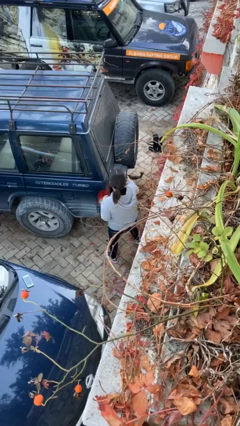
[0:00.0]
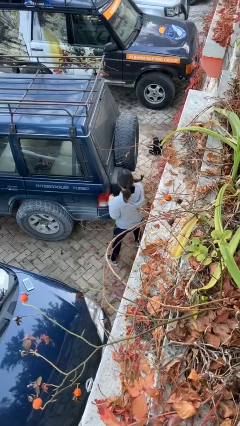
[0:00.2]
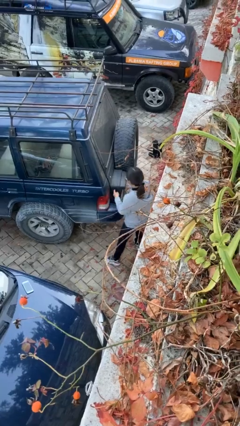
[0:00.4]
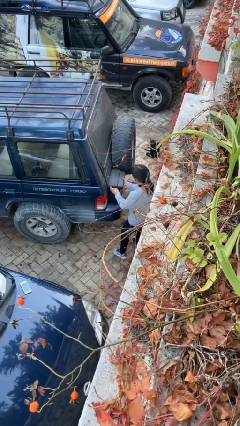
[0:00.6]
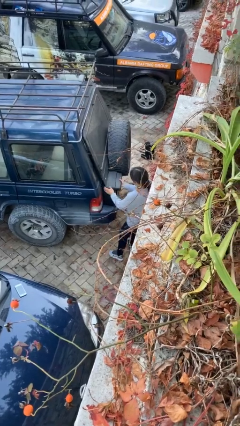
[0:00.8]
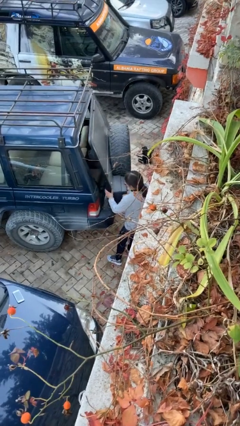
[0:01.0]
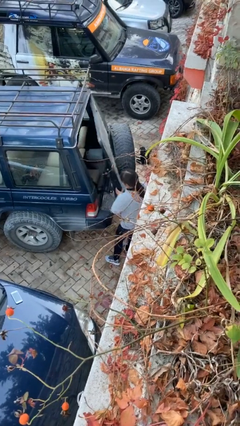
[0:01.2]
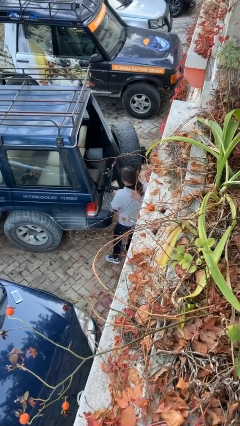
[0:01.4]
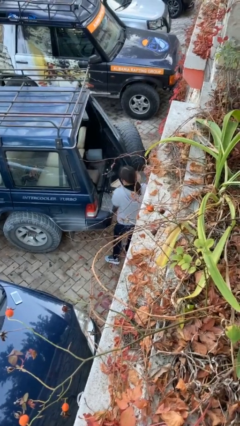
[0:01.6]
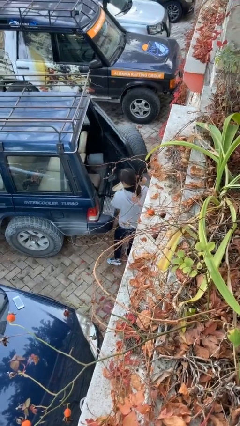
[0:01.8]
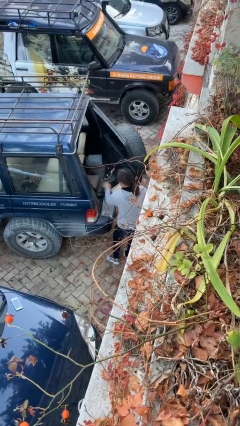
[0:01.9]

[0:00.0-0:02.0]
person opens car trunk

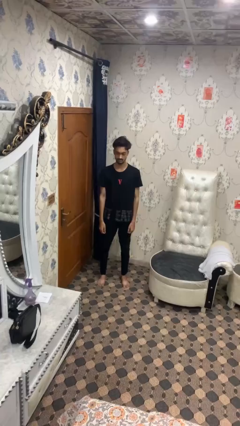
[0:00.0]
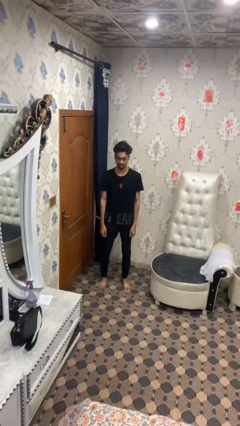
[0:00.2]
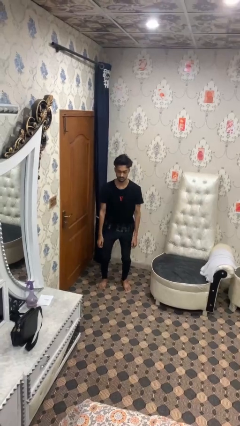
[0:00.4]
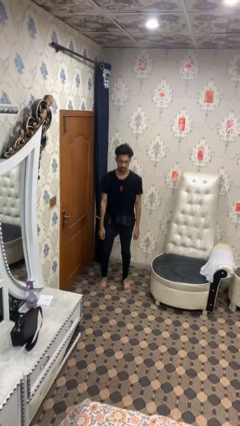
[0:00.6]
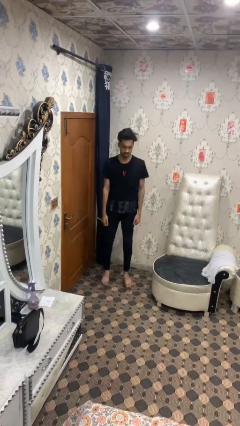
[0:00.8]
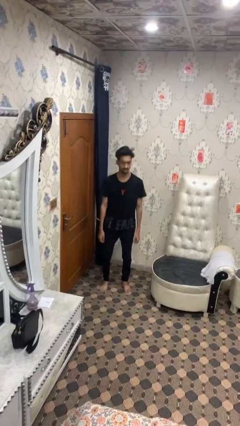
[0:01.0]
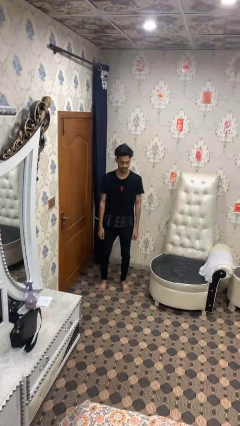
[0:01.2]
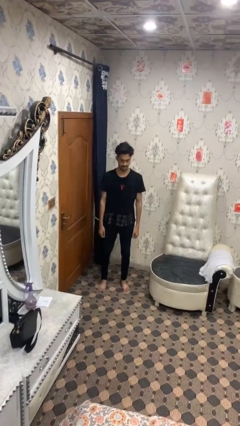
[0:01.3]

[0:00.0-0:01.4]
person jumps

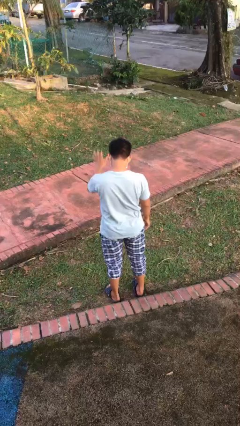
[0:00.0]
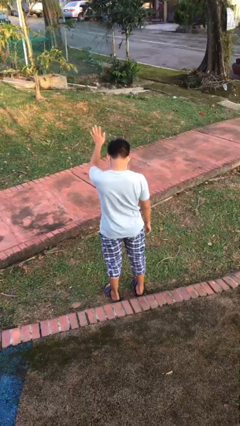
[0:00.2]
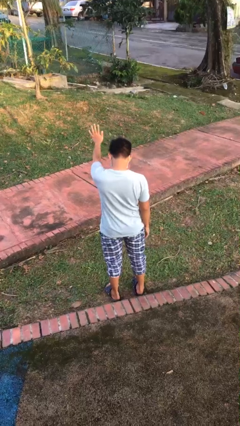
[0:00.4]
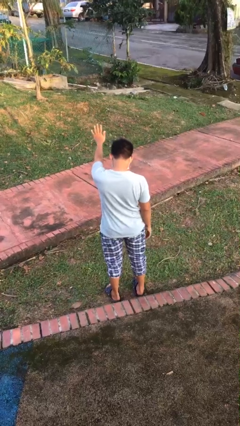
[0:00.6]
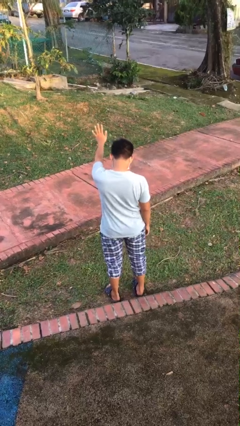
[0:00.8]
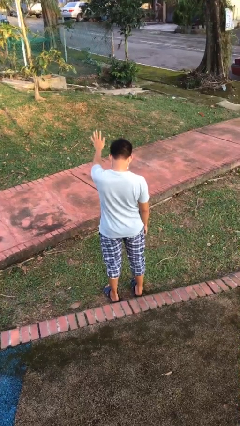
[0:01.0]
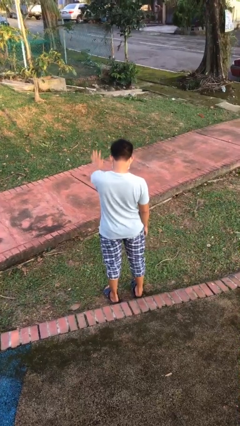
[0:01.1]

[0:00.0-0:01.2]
person gestures stop

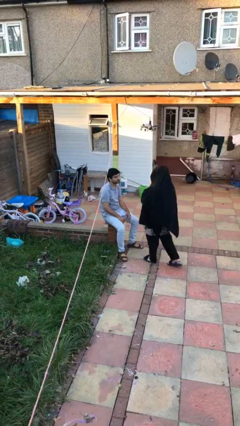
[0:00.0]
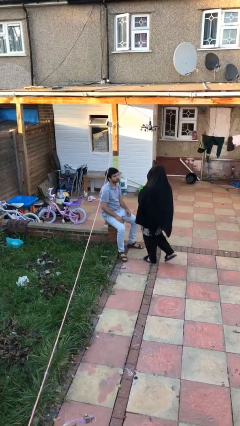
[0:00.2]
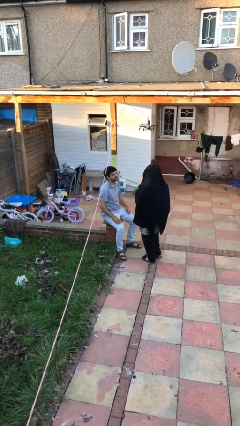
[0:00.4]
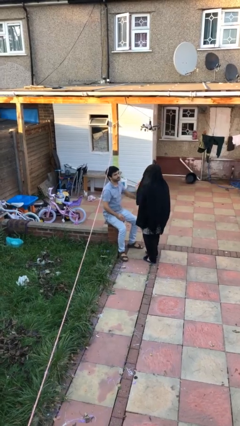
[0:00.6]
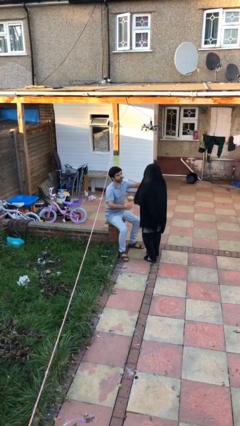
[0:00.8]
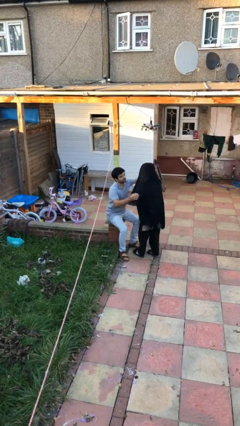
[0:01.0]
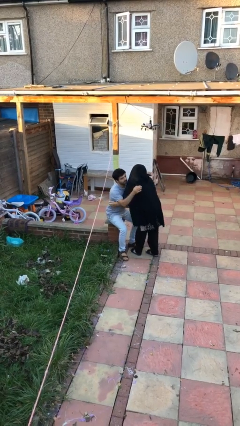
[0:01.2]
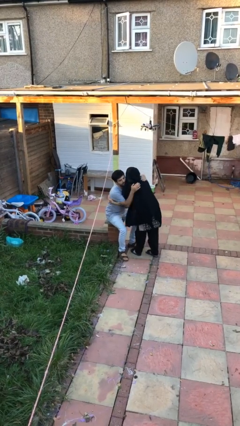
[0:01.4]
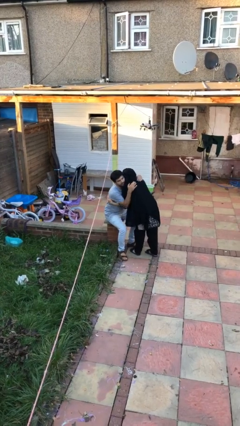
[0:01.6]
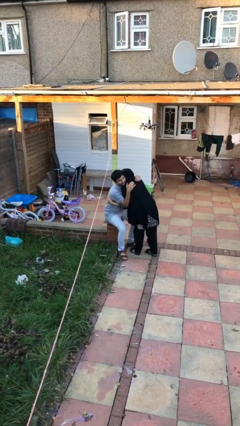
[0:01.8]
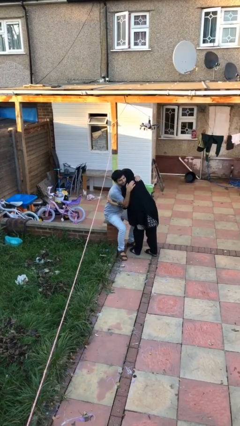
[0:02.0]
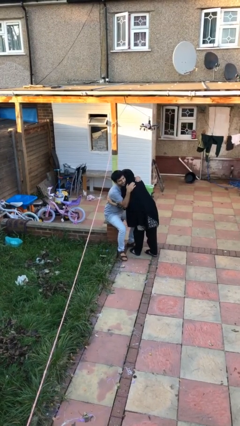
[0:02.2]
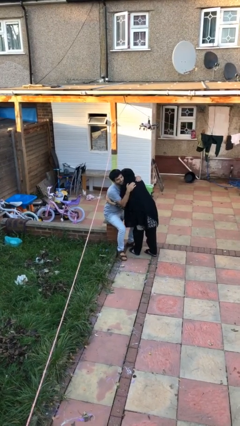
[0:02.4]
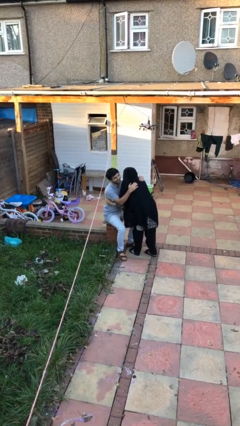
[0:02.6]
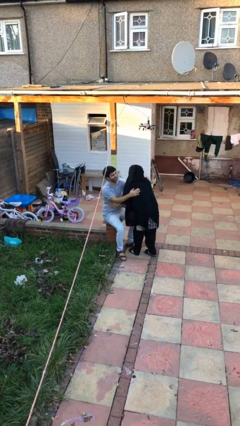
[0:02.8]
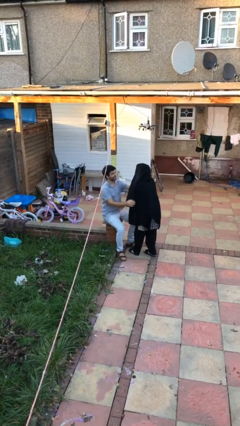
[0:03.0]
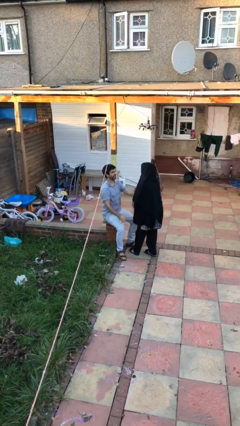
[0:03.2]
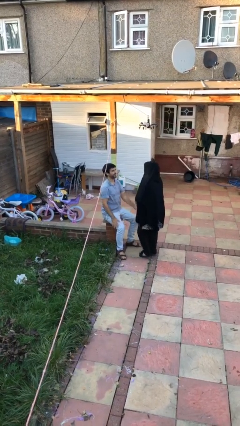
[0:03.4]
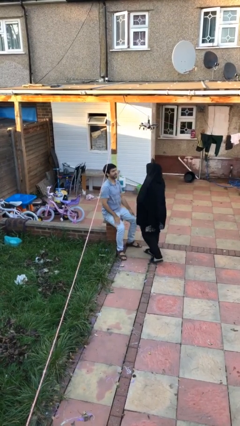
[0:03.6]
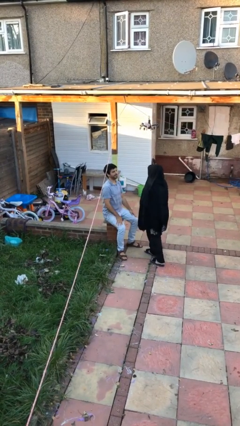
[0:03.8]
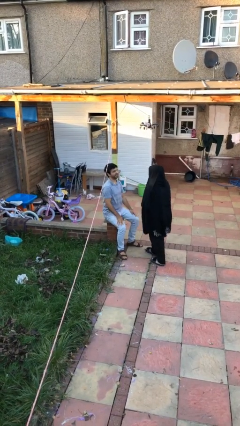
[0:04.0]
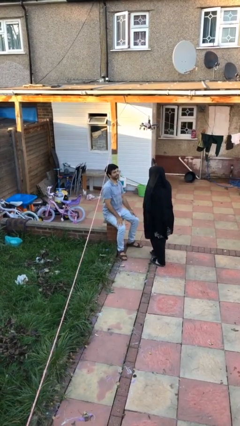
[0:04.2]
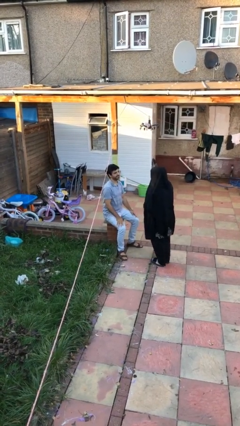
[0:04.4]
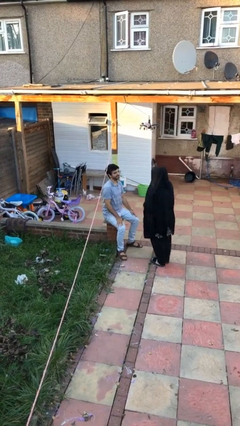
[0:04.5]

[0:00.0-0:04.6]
person embraces person

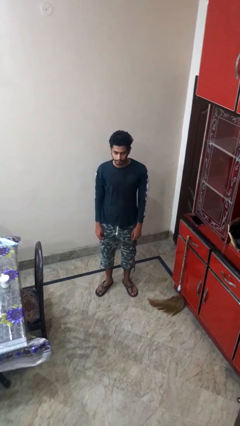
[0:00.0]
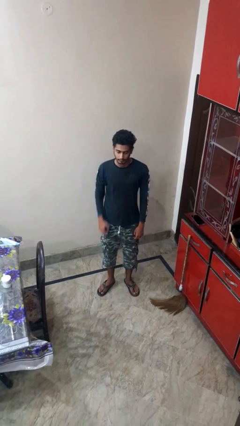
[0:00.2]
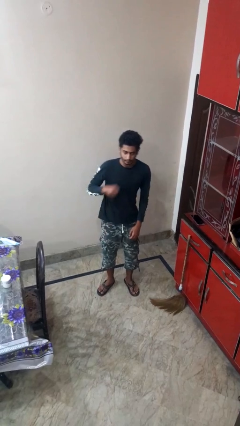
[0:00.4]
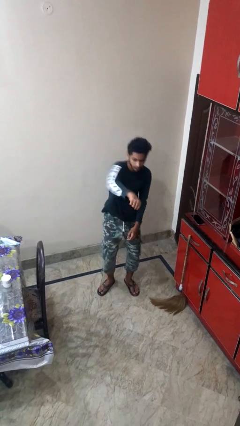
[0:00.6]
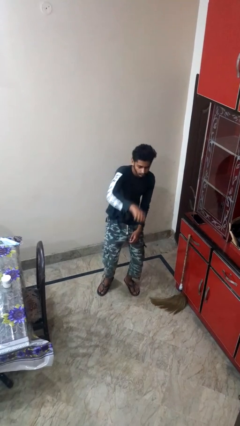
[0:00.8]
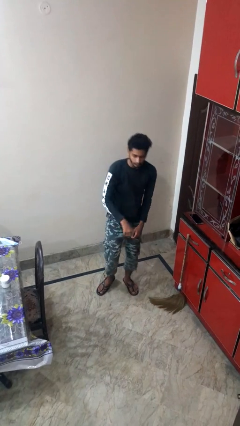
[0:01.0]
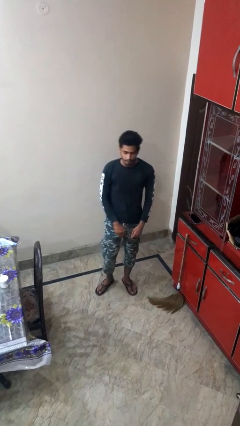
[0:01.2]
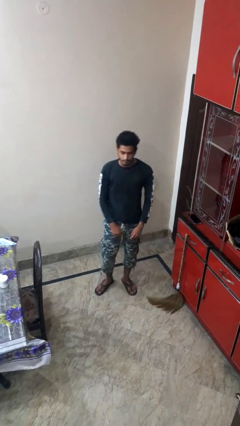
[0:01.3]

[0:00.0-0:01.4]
person punches

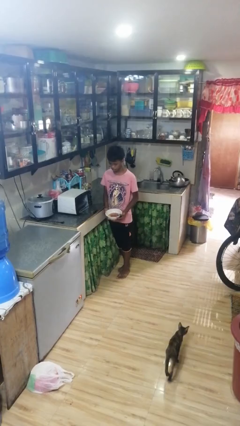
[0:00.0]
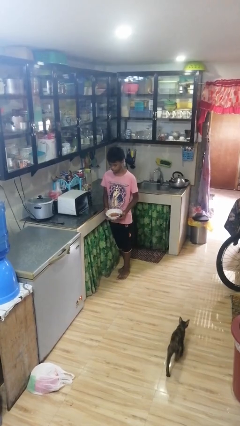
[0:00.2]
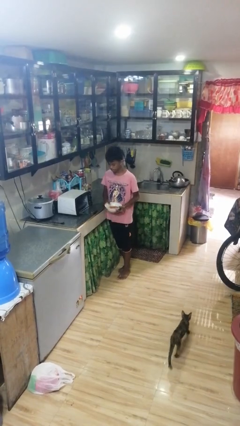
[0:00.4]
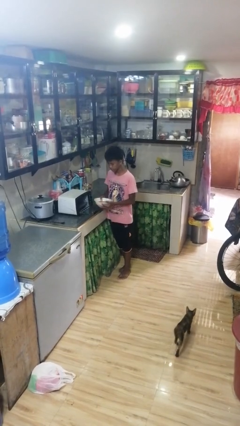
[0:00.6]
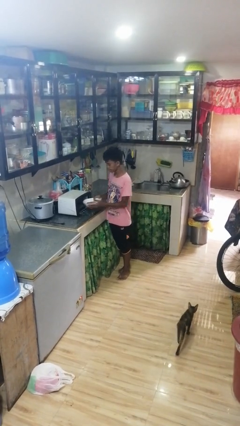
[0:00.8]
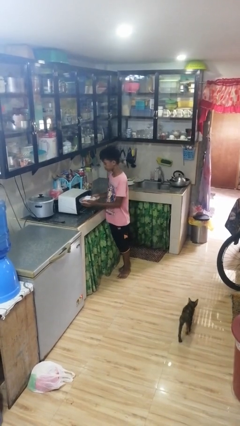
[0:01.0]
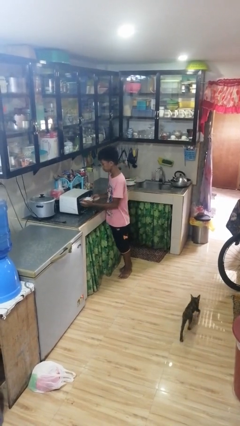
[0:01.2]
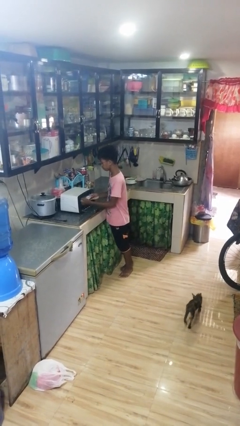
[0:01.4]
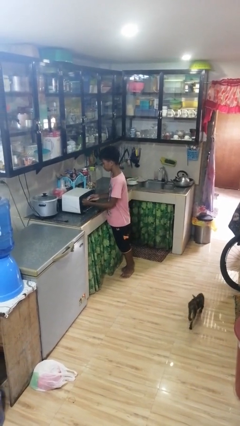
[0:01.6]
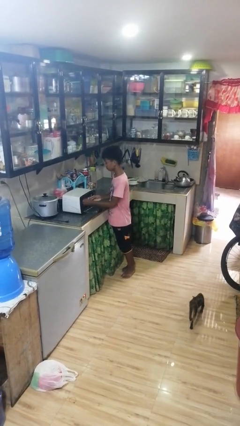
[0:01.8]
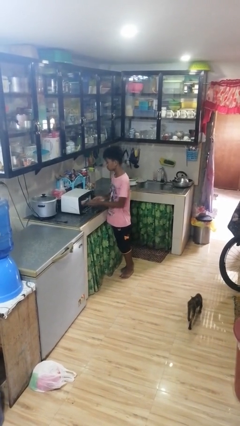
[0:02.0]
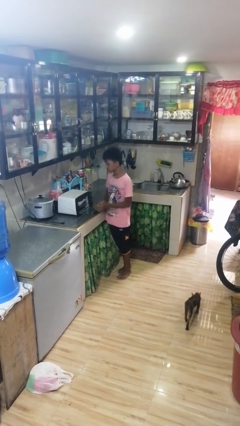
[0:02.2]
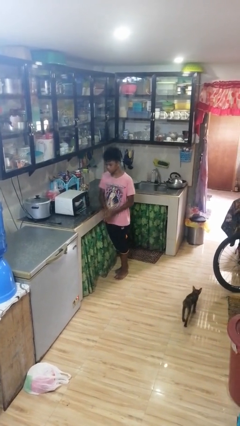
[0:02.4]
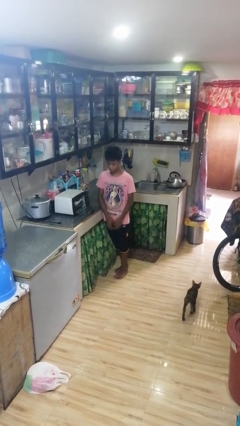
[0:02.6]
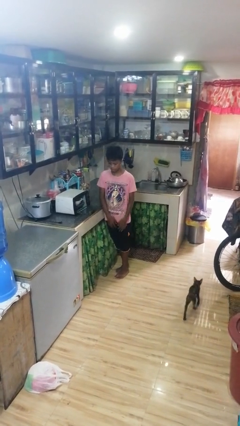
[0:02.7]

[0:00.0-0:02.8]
person puts object into microwave

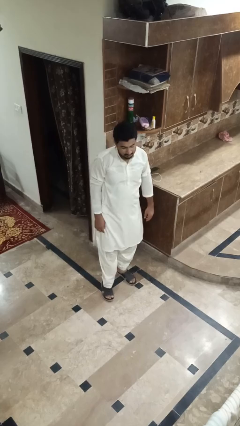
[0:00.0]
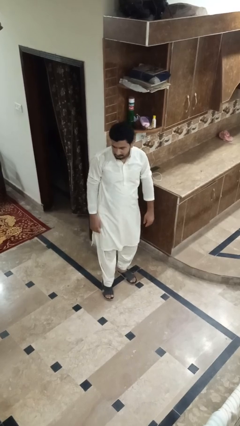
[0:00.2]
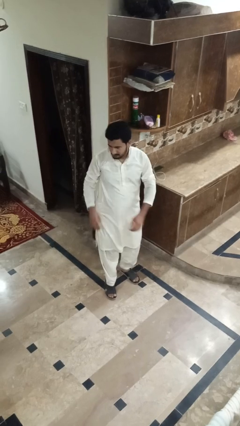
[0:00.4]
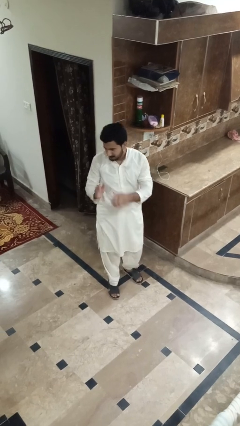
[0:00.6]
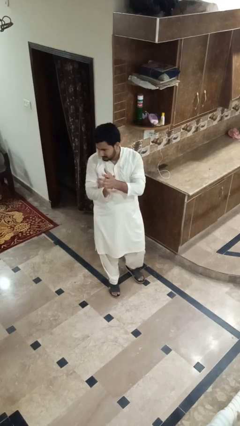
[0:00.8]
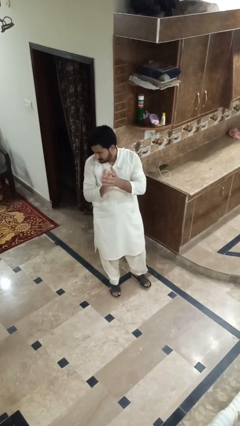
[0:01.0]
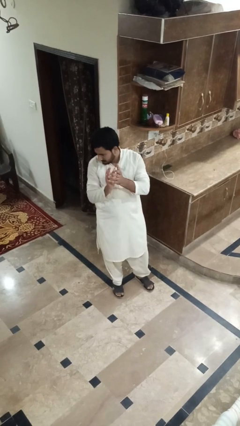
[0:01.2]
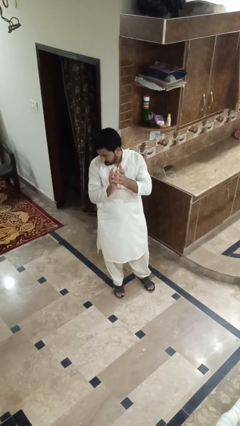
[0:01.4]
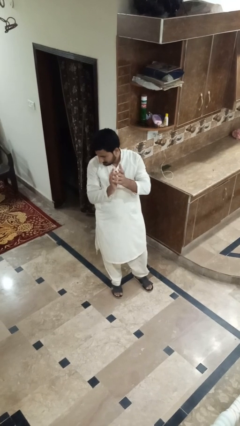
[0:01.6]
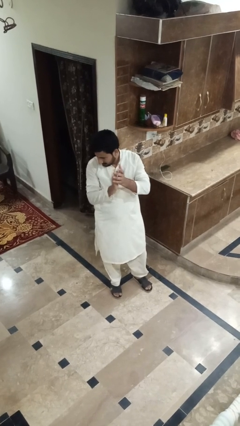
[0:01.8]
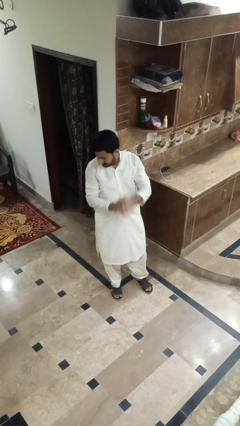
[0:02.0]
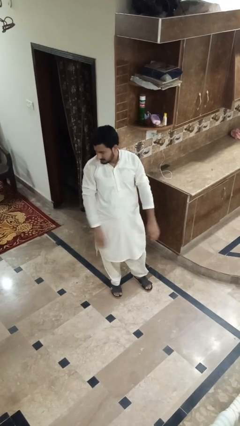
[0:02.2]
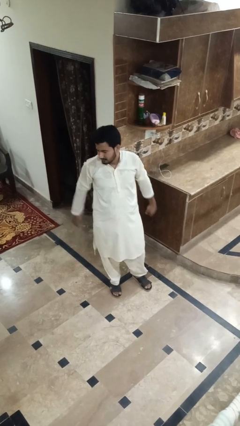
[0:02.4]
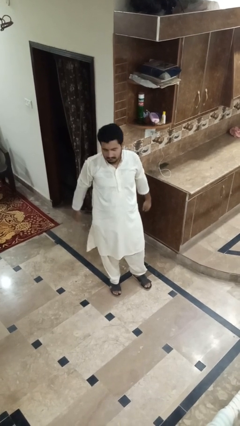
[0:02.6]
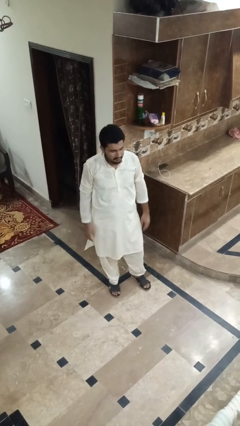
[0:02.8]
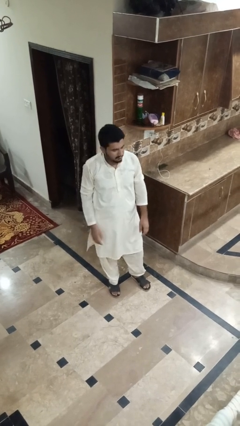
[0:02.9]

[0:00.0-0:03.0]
person claps hands

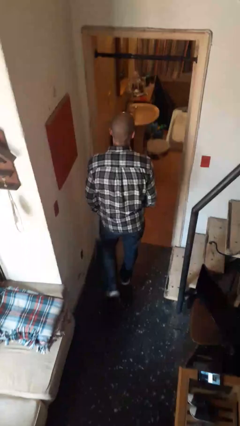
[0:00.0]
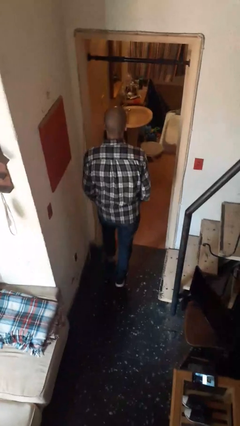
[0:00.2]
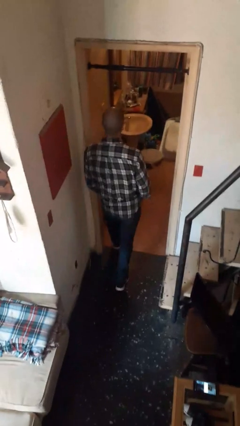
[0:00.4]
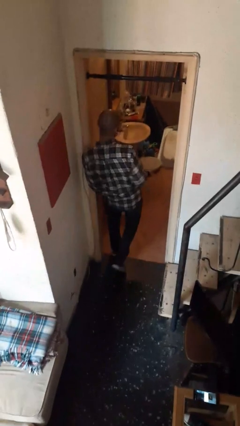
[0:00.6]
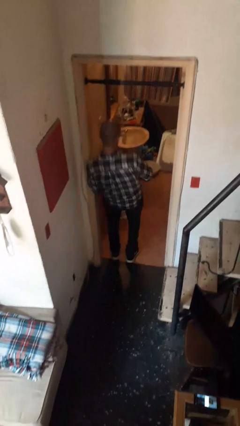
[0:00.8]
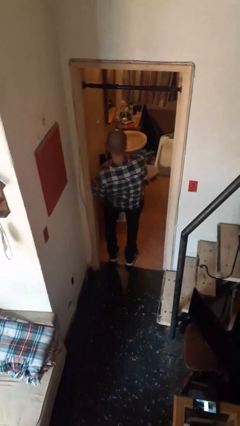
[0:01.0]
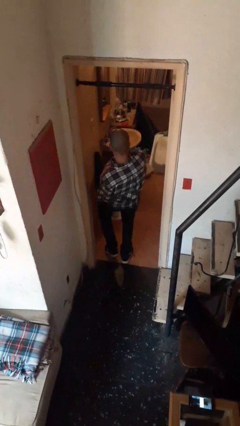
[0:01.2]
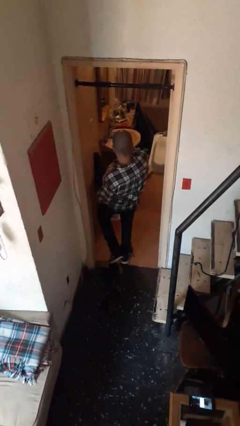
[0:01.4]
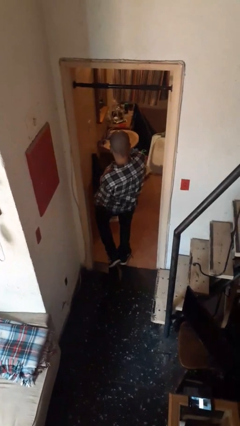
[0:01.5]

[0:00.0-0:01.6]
person bumps into wall
